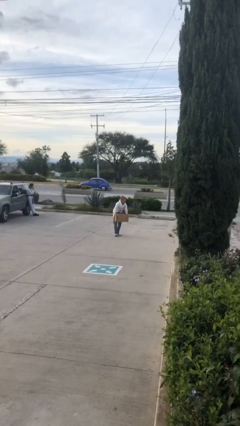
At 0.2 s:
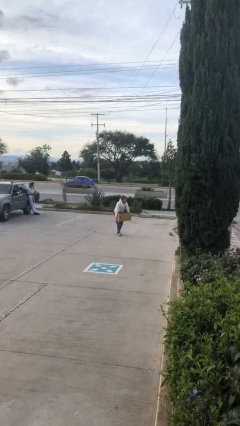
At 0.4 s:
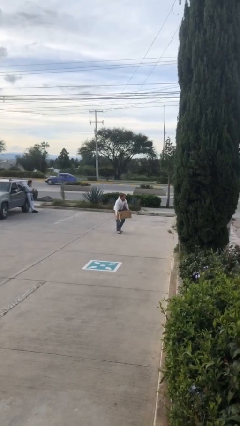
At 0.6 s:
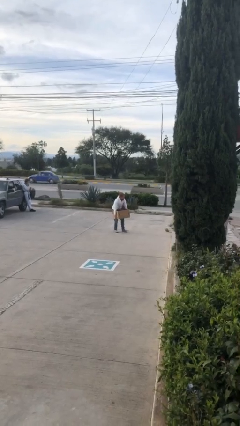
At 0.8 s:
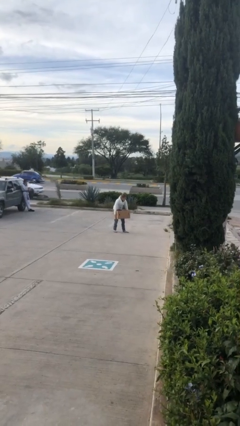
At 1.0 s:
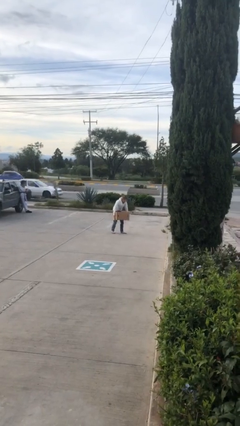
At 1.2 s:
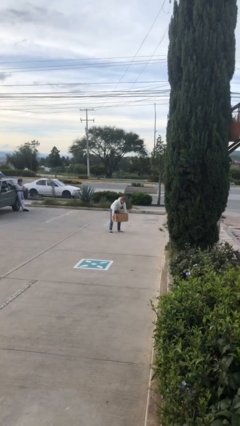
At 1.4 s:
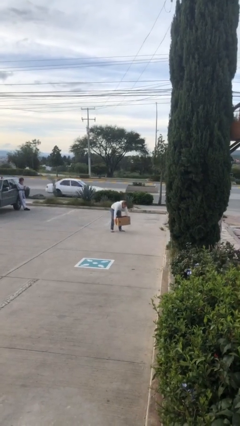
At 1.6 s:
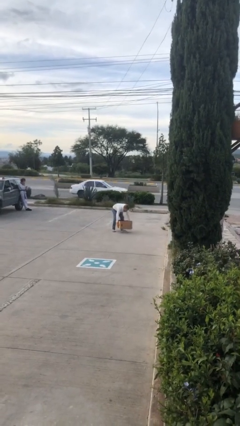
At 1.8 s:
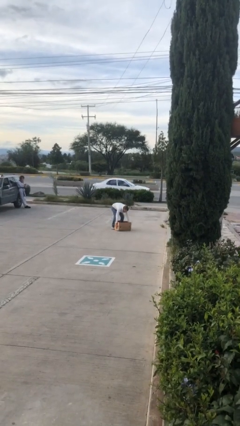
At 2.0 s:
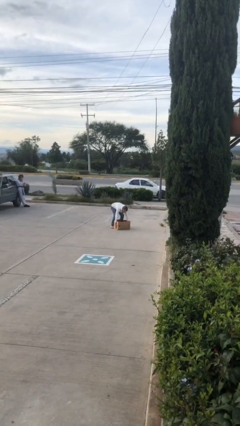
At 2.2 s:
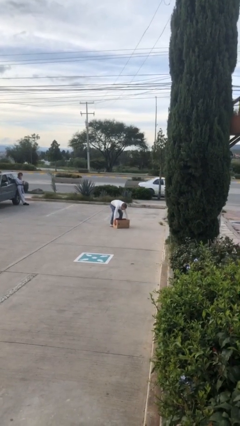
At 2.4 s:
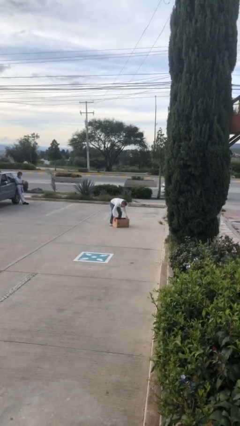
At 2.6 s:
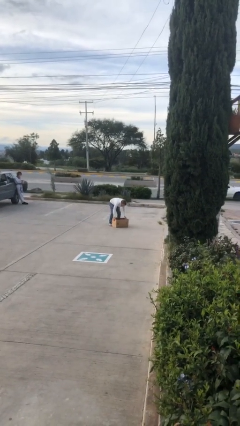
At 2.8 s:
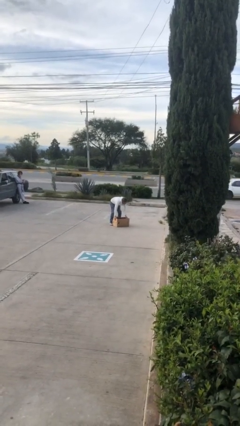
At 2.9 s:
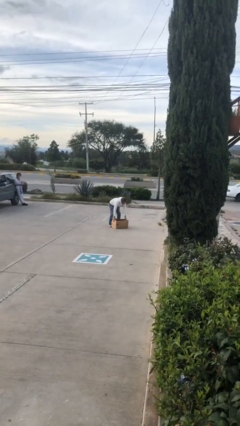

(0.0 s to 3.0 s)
person puts down object on floor

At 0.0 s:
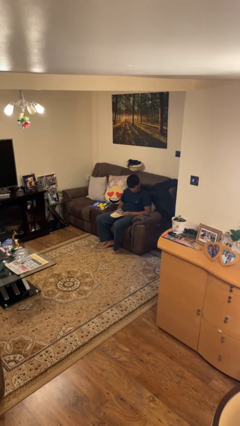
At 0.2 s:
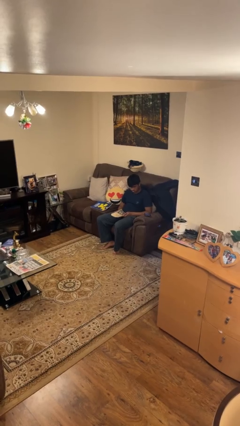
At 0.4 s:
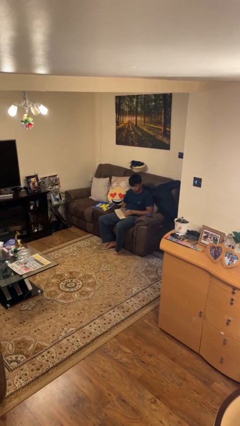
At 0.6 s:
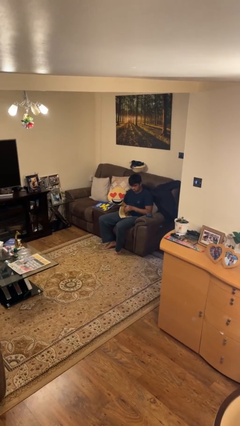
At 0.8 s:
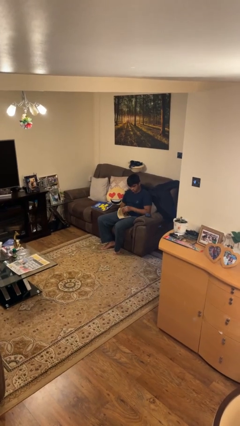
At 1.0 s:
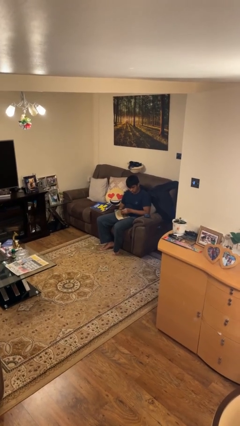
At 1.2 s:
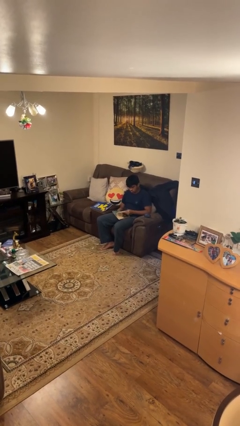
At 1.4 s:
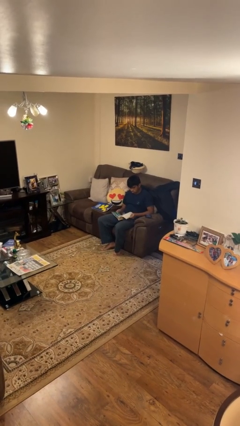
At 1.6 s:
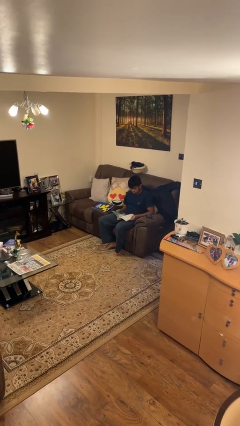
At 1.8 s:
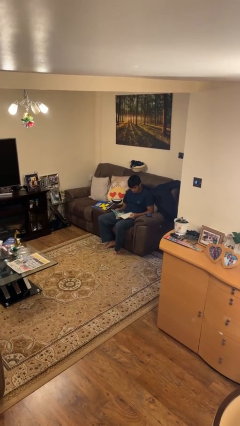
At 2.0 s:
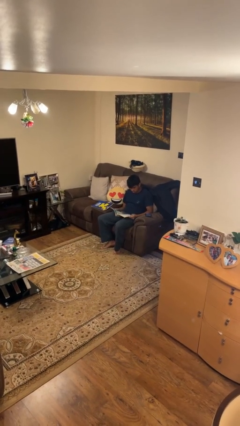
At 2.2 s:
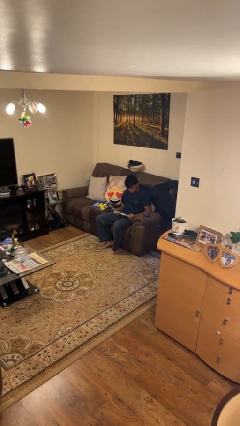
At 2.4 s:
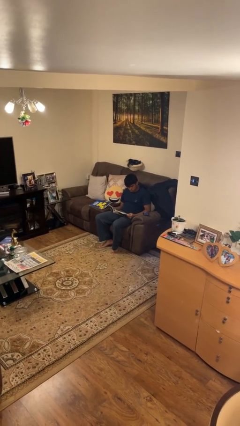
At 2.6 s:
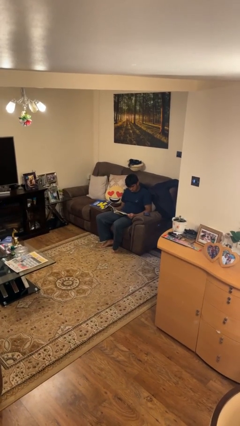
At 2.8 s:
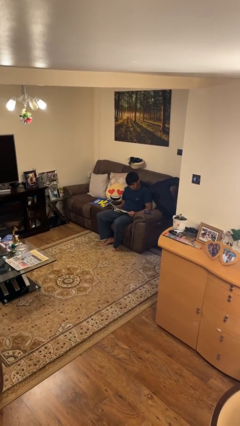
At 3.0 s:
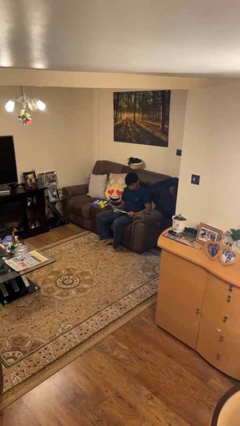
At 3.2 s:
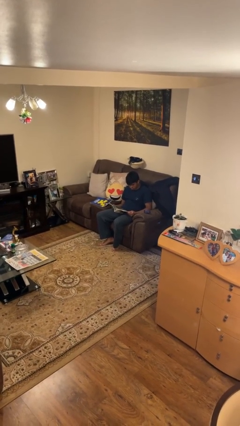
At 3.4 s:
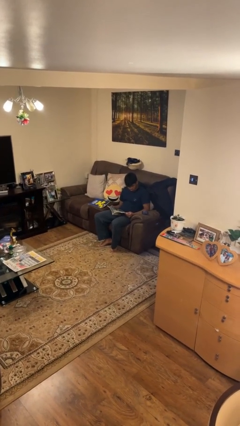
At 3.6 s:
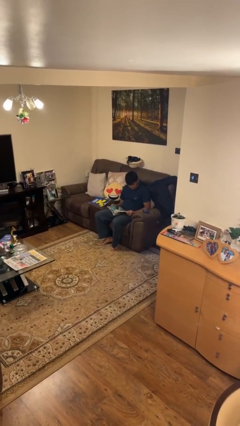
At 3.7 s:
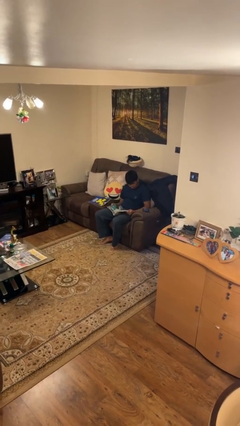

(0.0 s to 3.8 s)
person reads book

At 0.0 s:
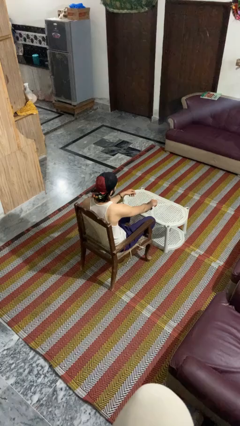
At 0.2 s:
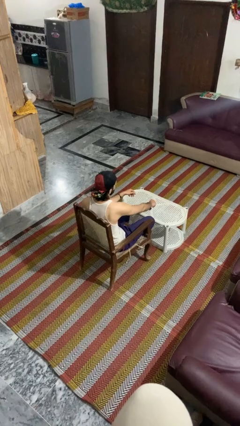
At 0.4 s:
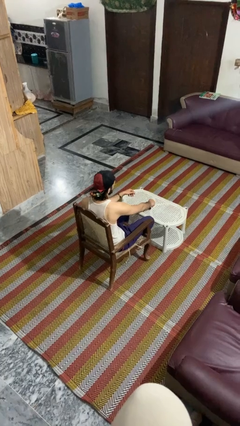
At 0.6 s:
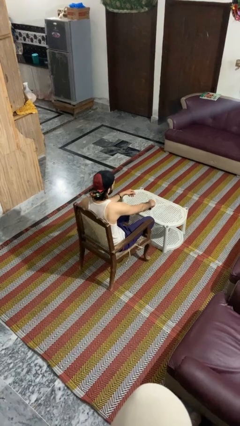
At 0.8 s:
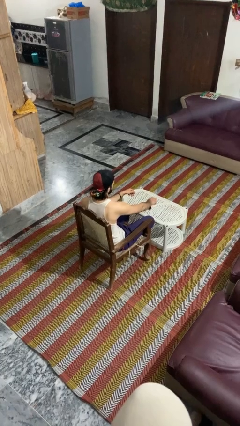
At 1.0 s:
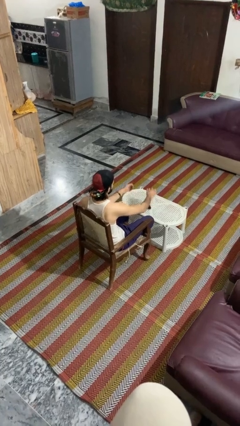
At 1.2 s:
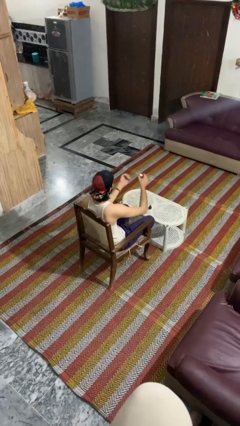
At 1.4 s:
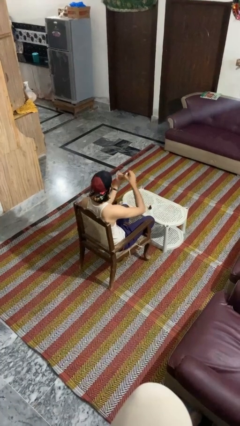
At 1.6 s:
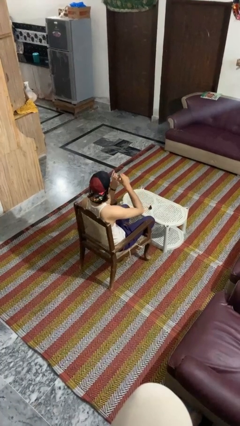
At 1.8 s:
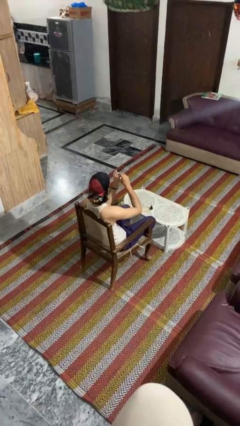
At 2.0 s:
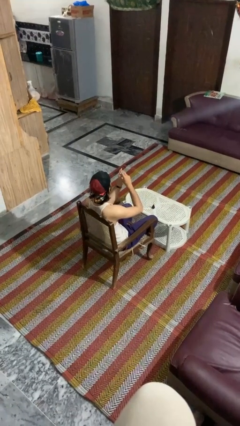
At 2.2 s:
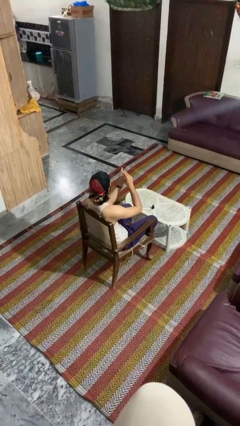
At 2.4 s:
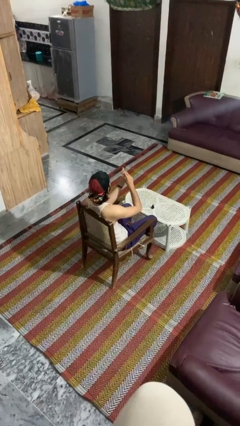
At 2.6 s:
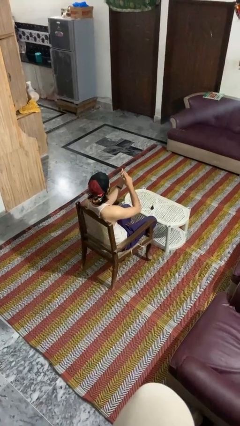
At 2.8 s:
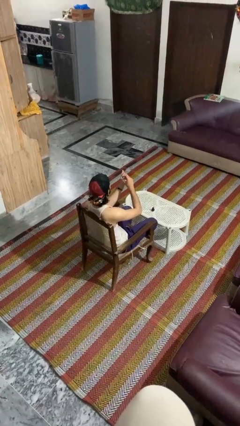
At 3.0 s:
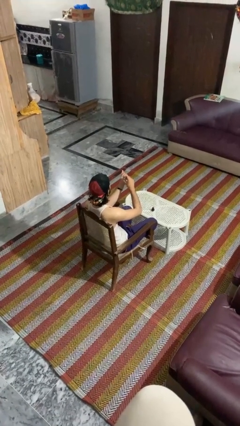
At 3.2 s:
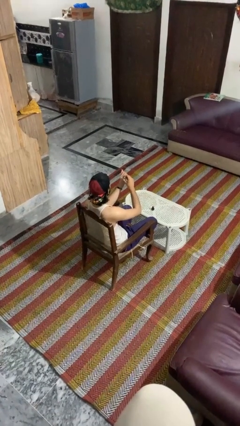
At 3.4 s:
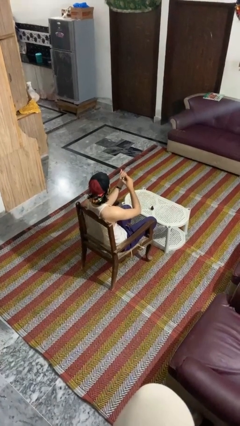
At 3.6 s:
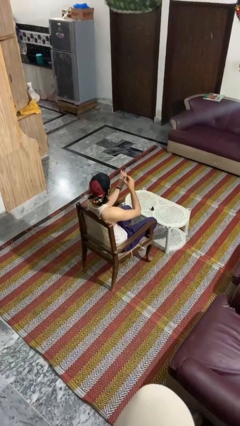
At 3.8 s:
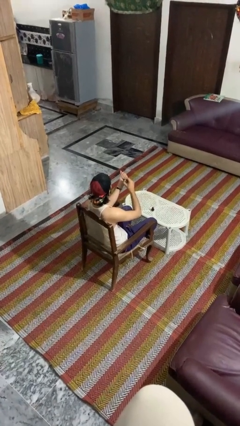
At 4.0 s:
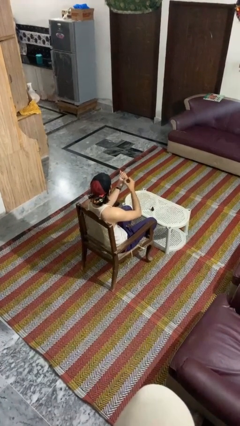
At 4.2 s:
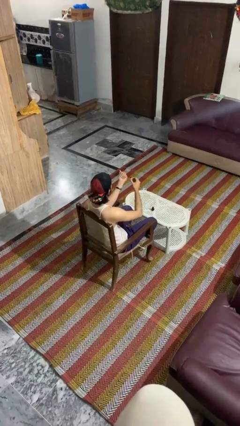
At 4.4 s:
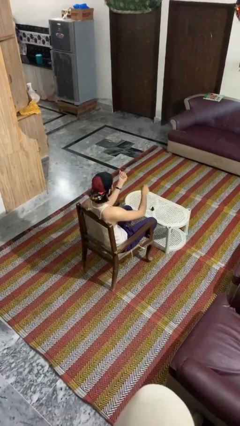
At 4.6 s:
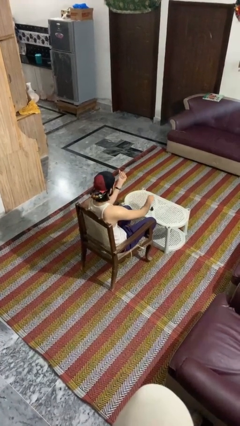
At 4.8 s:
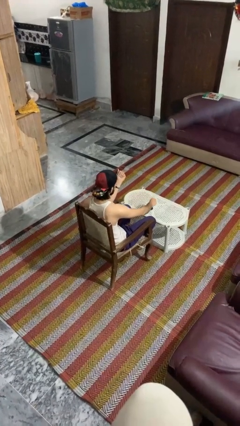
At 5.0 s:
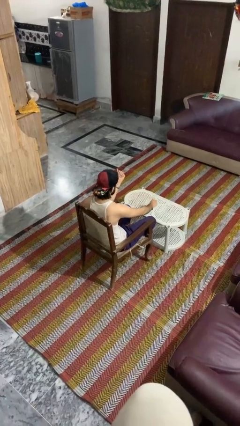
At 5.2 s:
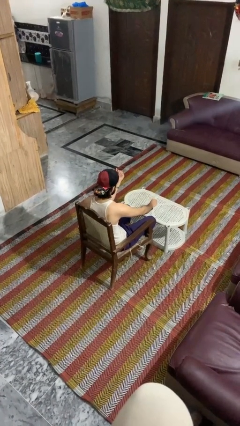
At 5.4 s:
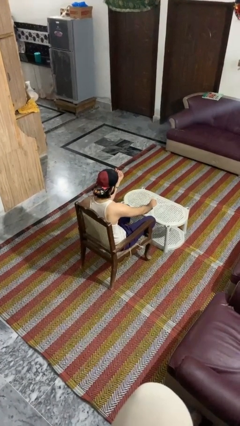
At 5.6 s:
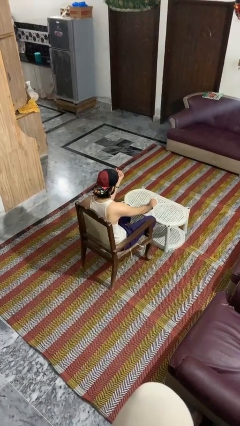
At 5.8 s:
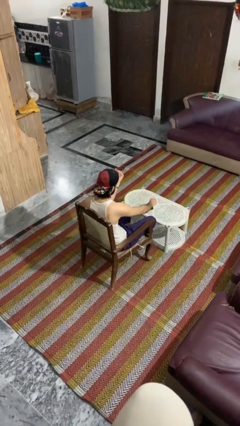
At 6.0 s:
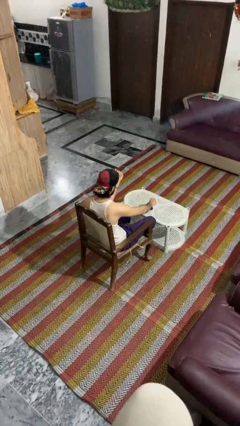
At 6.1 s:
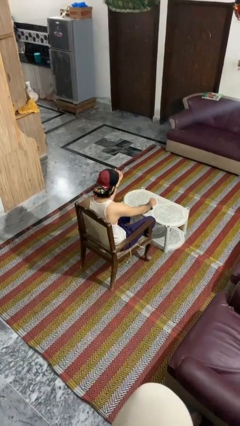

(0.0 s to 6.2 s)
person paints fingernails

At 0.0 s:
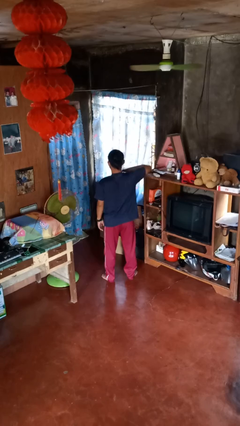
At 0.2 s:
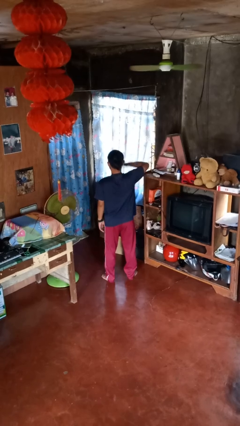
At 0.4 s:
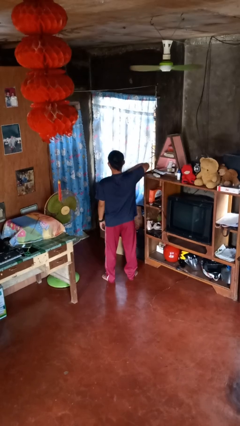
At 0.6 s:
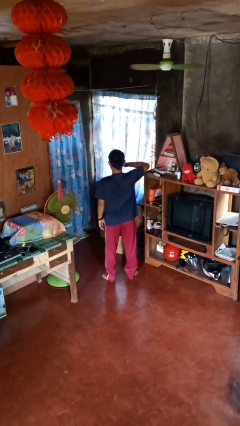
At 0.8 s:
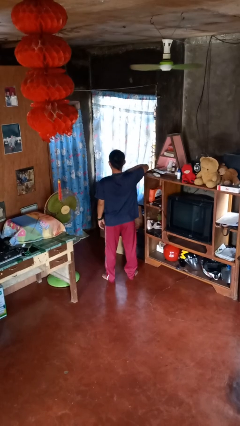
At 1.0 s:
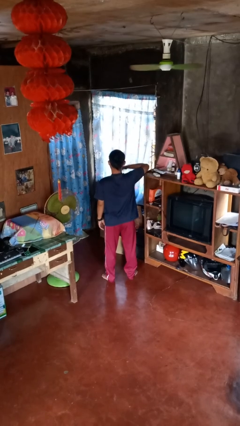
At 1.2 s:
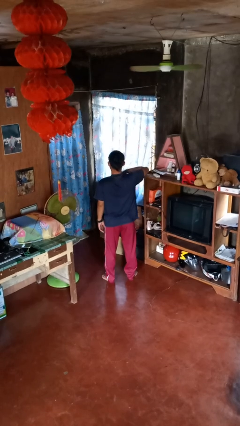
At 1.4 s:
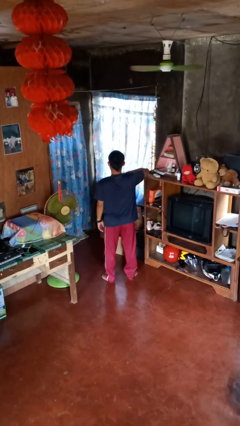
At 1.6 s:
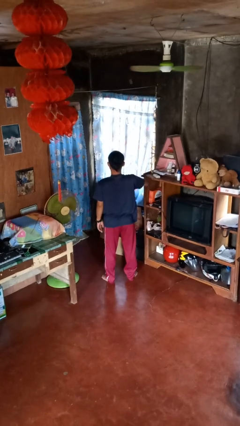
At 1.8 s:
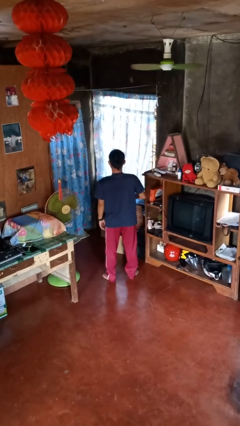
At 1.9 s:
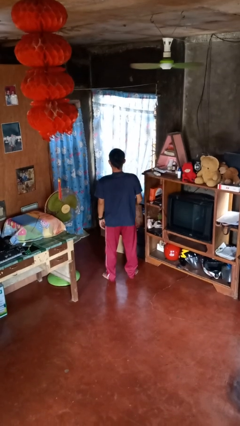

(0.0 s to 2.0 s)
person drums on chest

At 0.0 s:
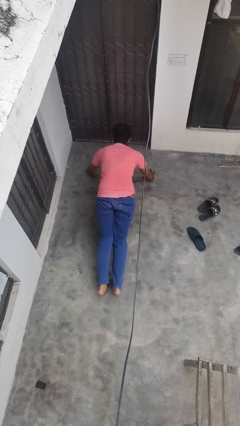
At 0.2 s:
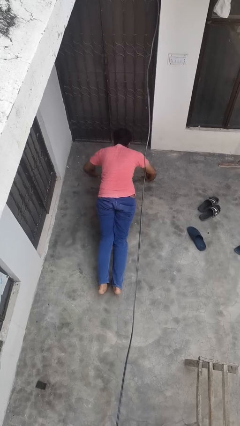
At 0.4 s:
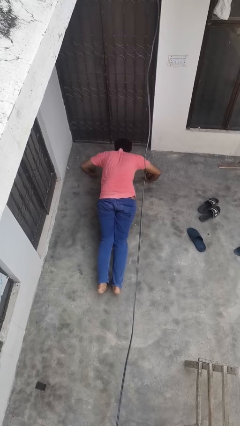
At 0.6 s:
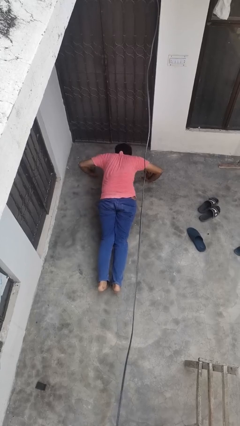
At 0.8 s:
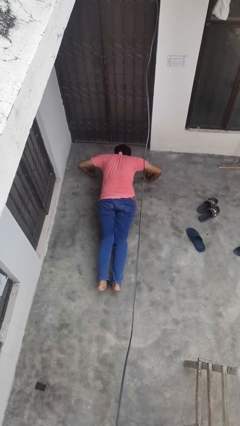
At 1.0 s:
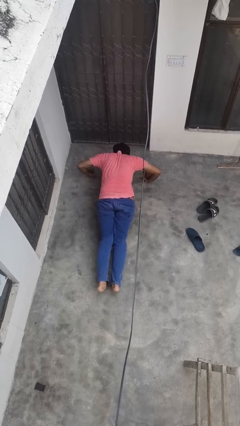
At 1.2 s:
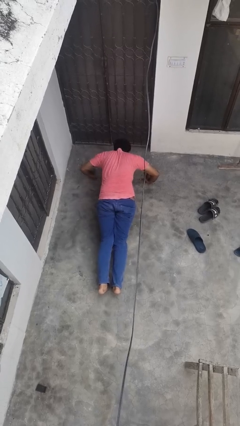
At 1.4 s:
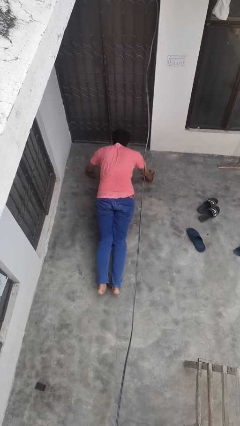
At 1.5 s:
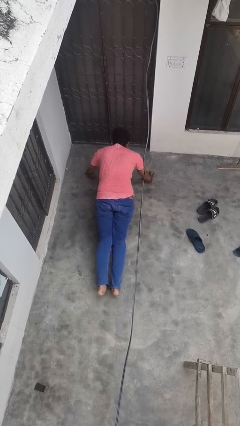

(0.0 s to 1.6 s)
person exercises with pushup

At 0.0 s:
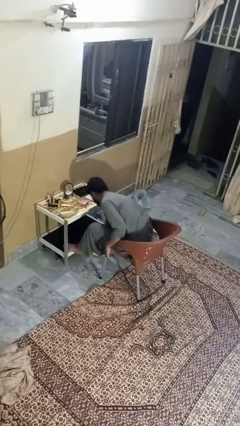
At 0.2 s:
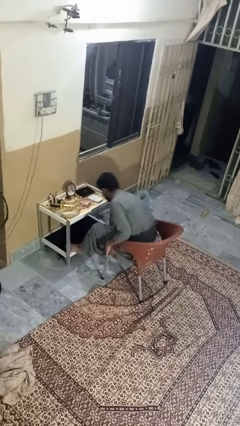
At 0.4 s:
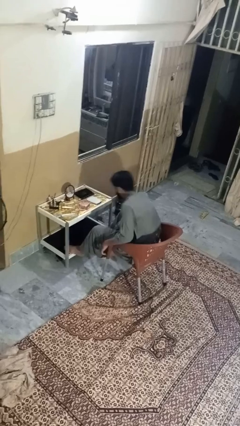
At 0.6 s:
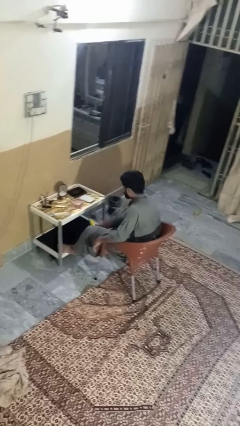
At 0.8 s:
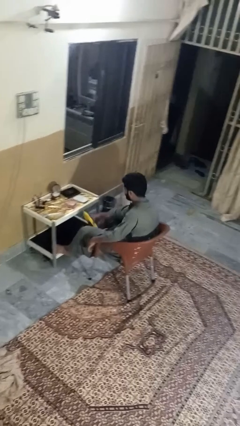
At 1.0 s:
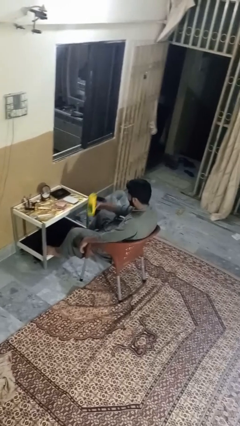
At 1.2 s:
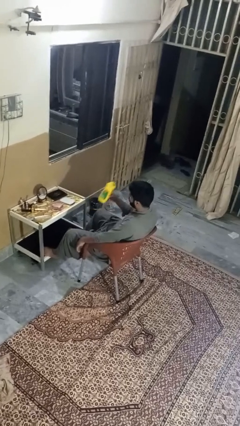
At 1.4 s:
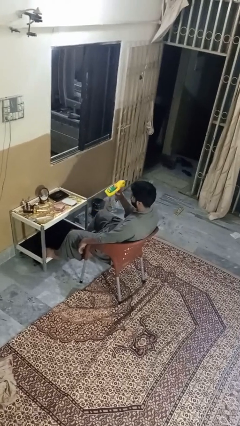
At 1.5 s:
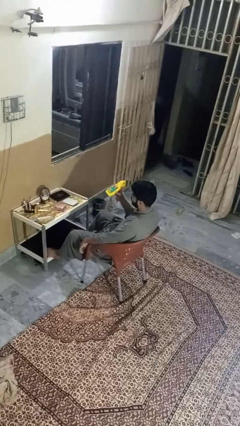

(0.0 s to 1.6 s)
person picks up object from floor
